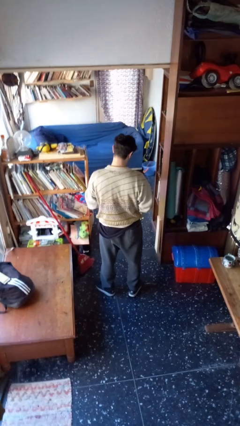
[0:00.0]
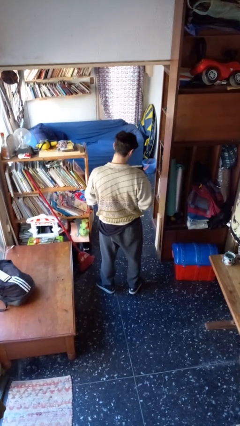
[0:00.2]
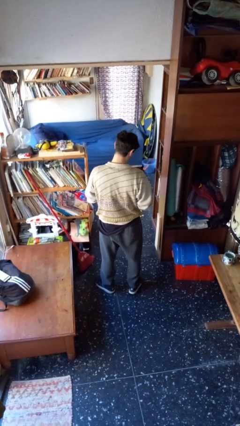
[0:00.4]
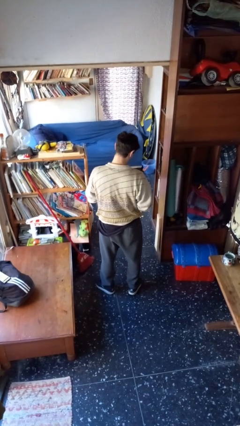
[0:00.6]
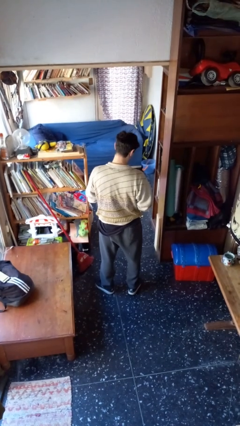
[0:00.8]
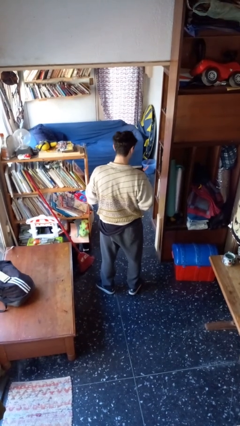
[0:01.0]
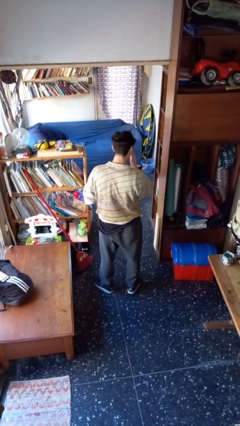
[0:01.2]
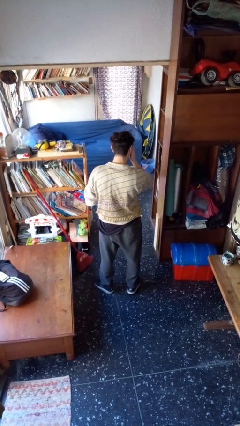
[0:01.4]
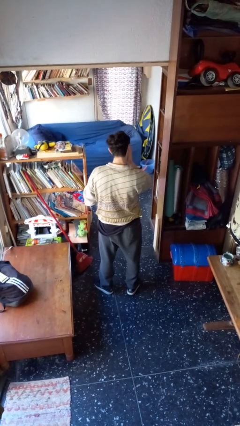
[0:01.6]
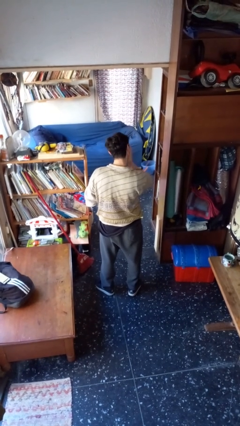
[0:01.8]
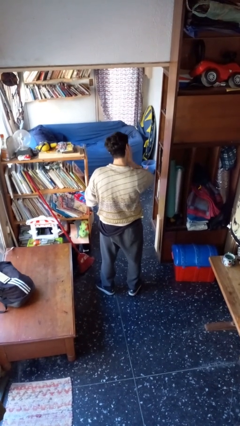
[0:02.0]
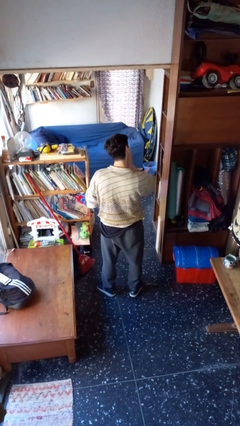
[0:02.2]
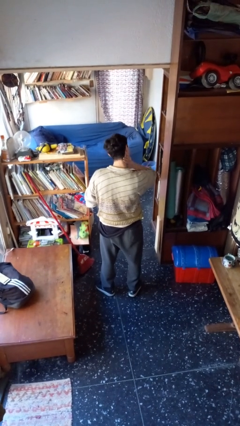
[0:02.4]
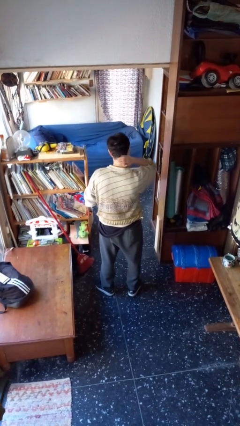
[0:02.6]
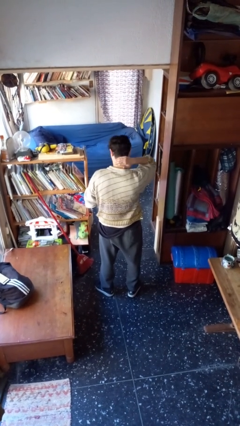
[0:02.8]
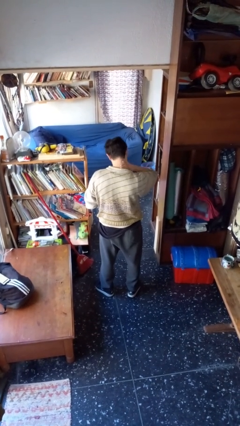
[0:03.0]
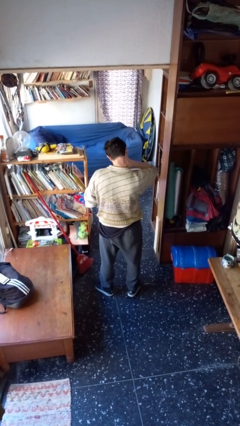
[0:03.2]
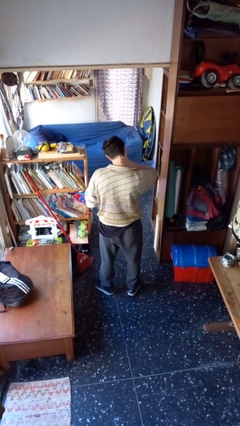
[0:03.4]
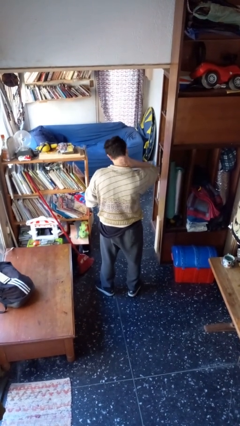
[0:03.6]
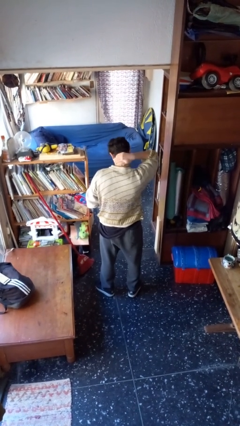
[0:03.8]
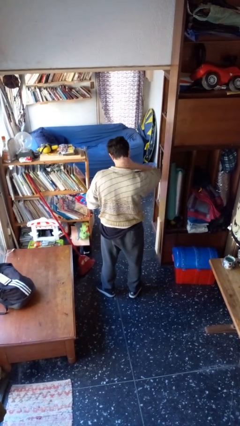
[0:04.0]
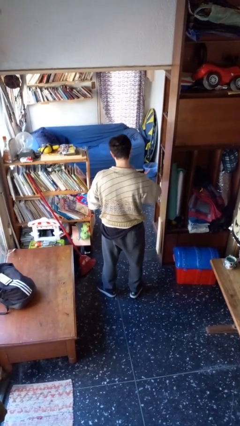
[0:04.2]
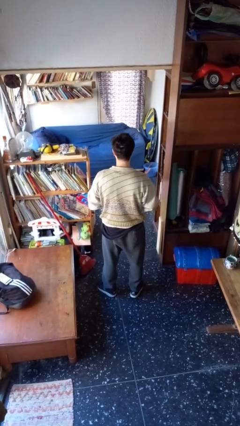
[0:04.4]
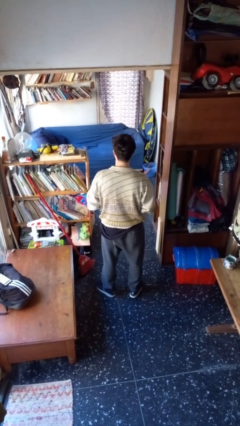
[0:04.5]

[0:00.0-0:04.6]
person applies sunscreen

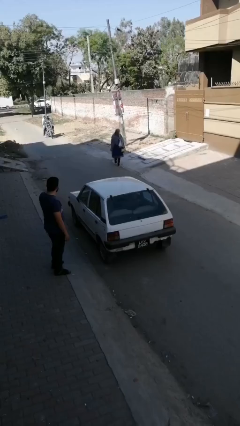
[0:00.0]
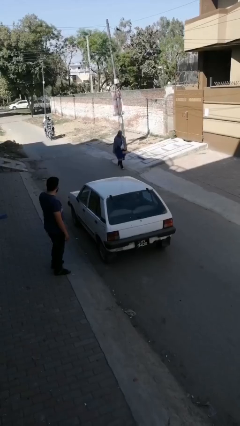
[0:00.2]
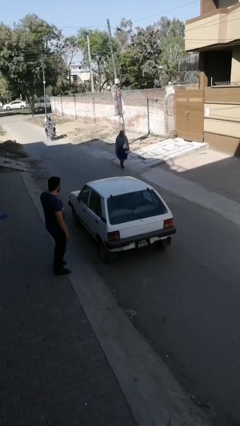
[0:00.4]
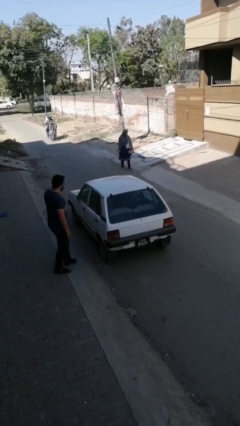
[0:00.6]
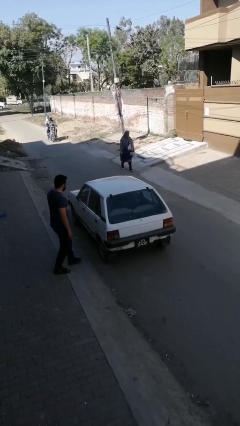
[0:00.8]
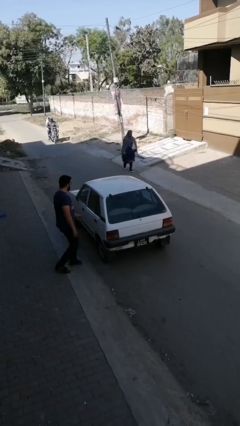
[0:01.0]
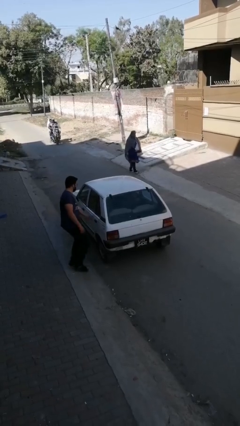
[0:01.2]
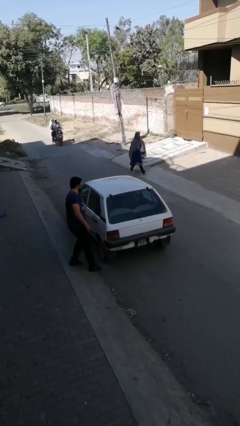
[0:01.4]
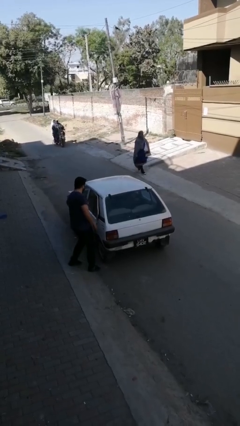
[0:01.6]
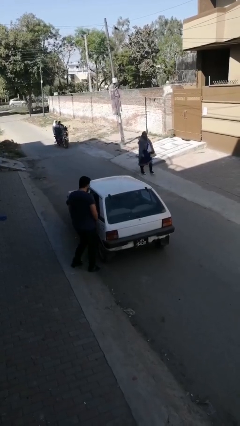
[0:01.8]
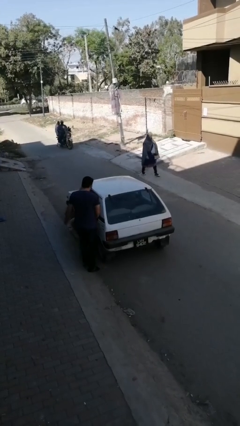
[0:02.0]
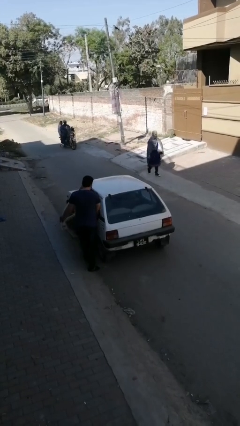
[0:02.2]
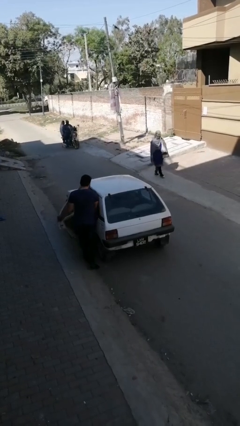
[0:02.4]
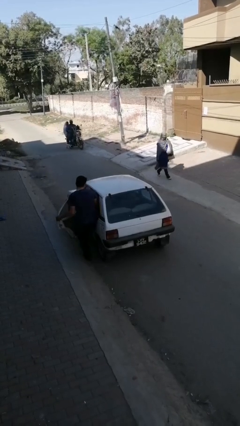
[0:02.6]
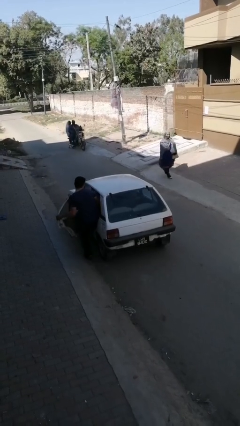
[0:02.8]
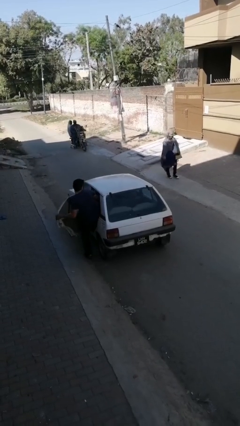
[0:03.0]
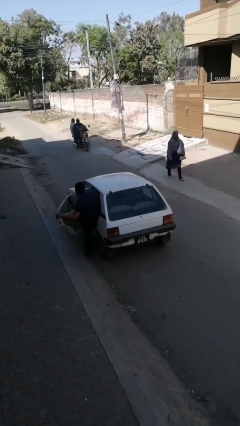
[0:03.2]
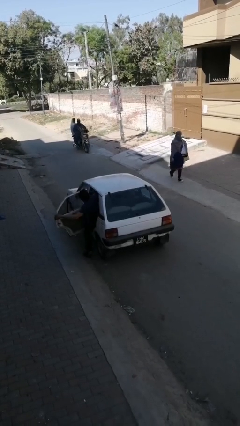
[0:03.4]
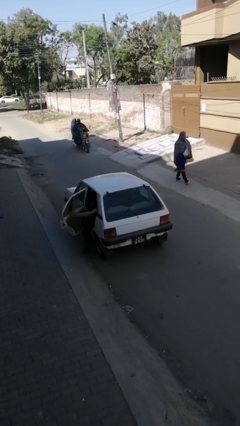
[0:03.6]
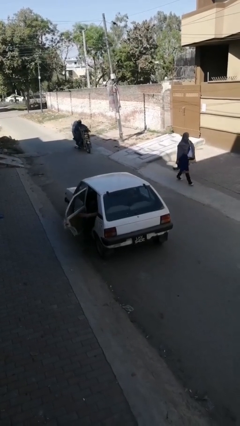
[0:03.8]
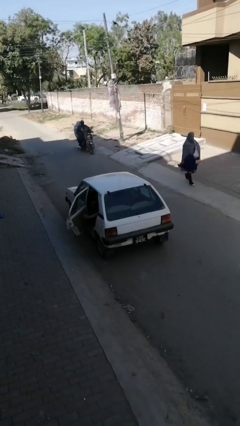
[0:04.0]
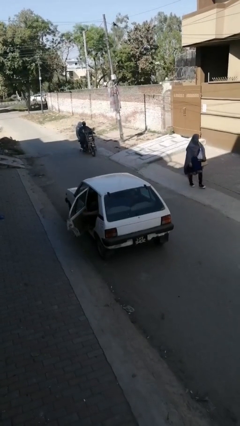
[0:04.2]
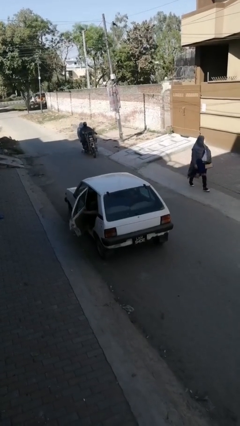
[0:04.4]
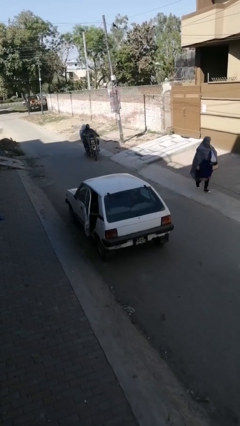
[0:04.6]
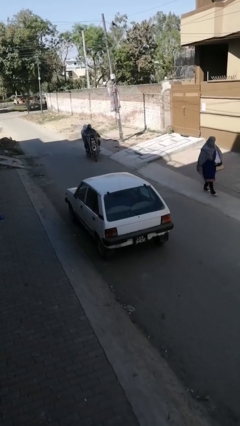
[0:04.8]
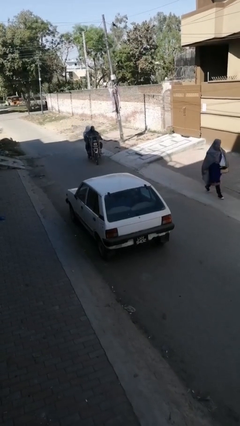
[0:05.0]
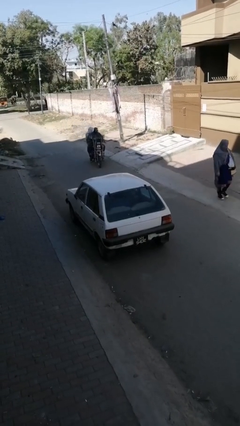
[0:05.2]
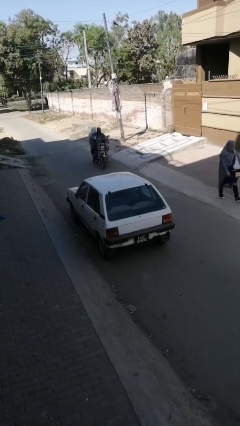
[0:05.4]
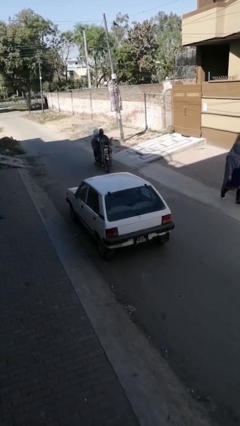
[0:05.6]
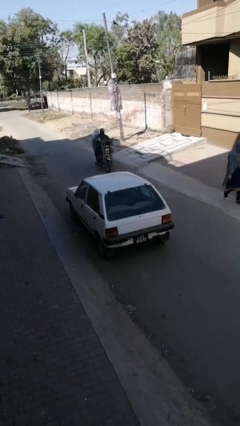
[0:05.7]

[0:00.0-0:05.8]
car picks up person

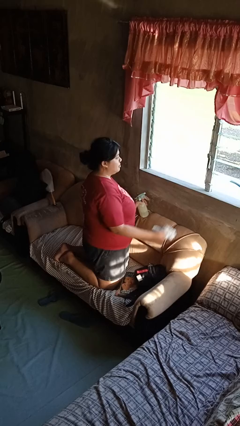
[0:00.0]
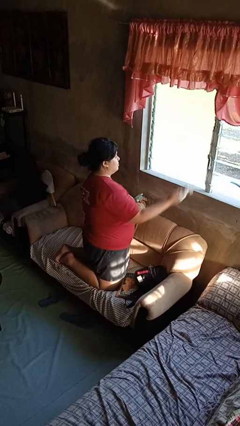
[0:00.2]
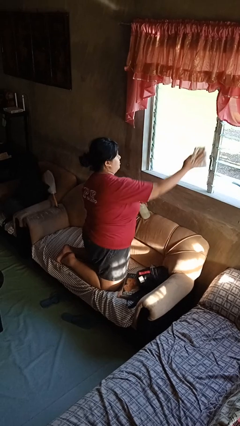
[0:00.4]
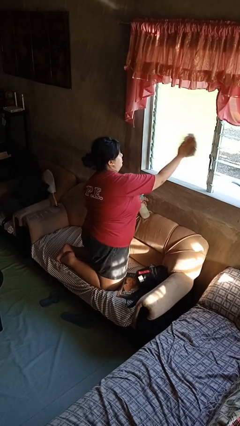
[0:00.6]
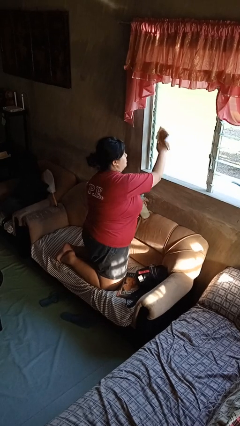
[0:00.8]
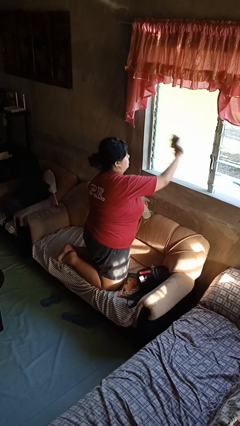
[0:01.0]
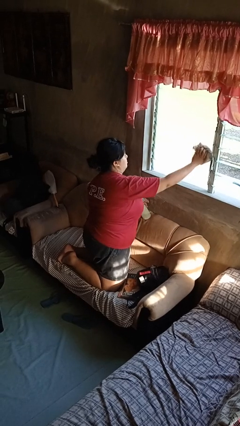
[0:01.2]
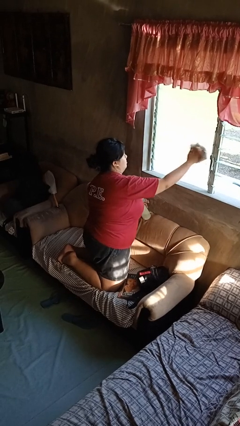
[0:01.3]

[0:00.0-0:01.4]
person washes window

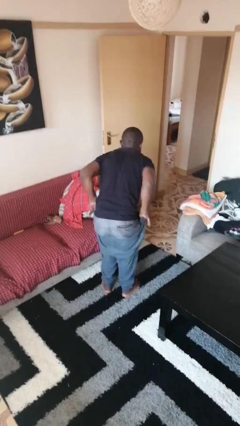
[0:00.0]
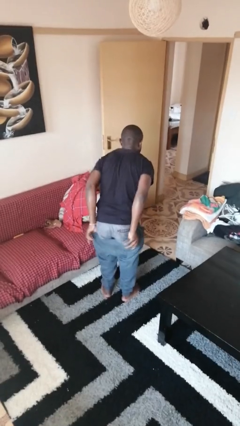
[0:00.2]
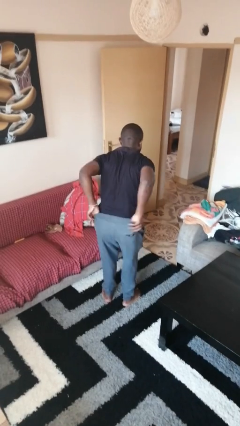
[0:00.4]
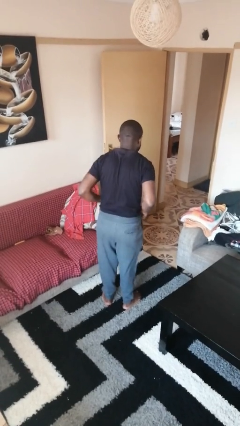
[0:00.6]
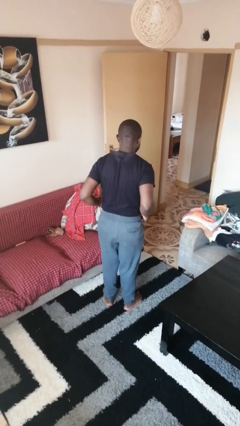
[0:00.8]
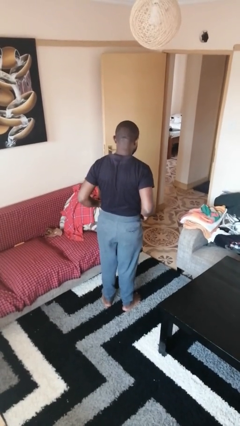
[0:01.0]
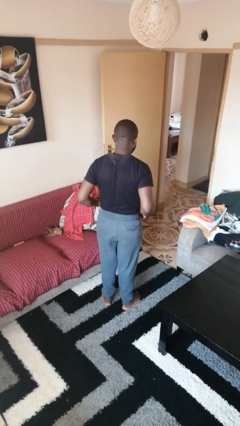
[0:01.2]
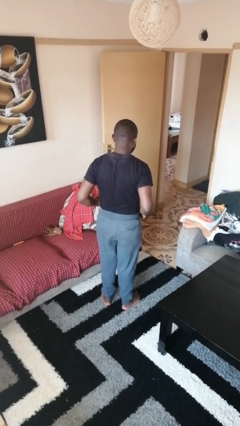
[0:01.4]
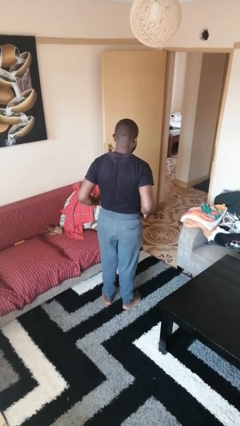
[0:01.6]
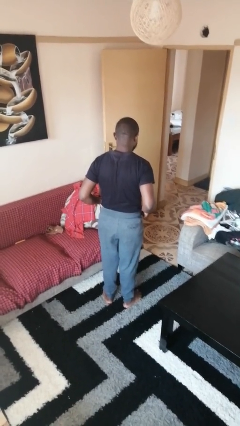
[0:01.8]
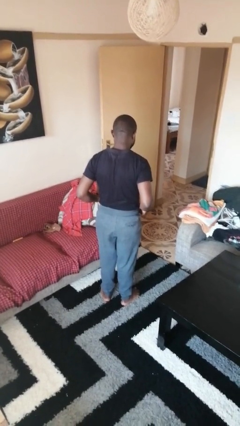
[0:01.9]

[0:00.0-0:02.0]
person puts on pants

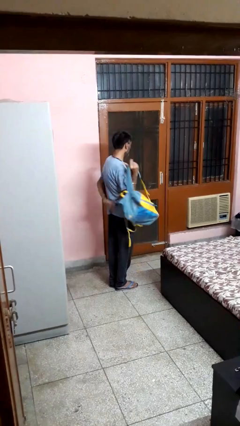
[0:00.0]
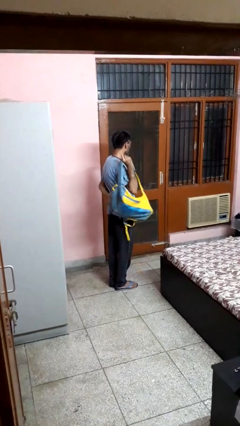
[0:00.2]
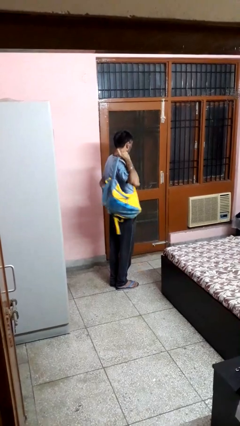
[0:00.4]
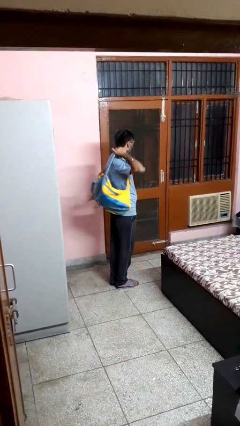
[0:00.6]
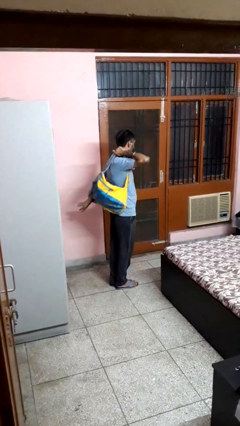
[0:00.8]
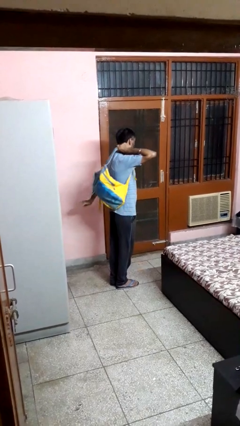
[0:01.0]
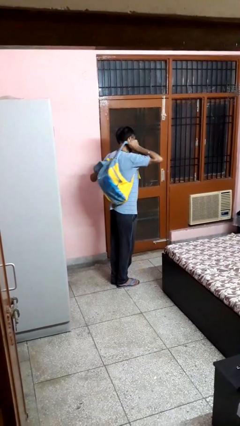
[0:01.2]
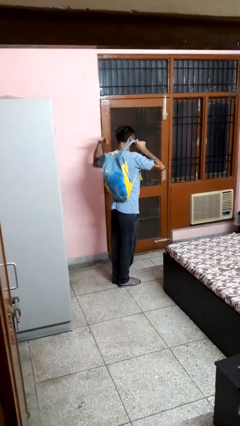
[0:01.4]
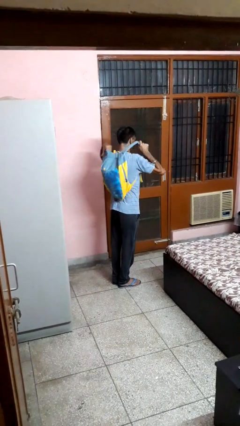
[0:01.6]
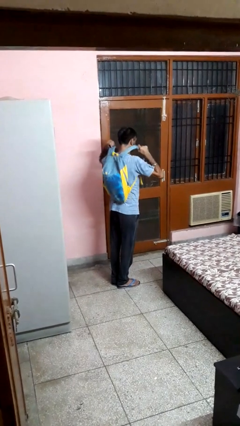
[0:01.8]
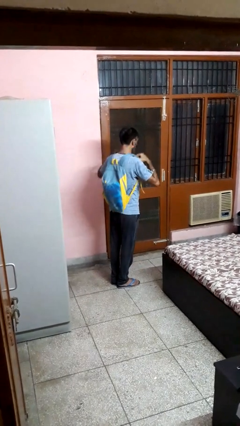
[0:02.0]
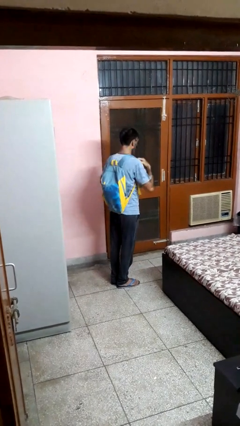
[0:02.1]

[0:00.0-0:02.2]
person puts on backpack

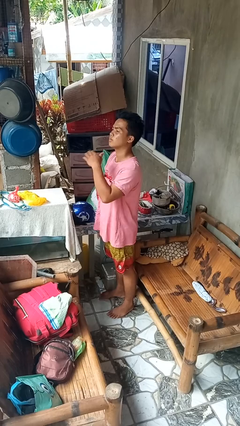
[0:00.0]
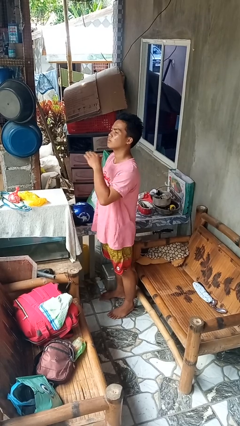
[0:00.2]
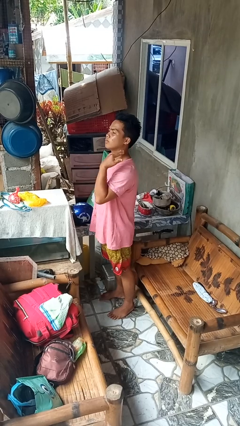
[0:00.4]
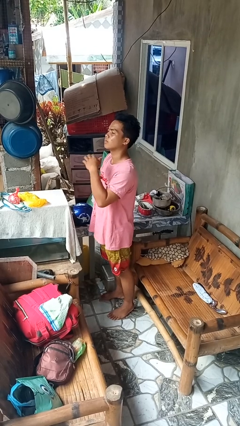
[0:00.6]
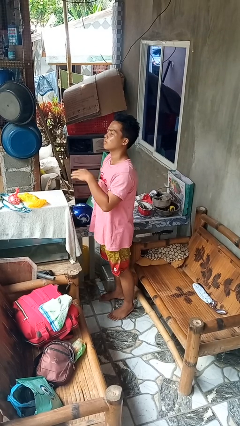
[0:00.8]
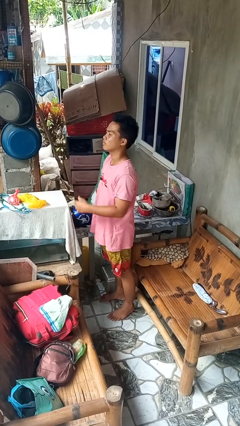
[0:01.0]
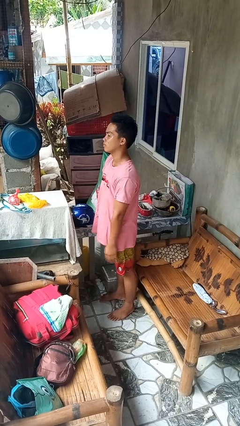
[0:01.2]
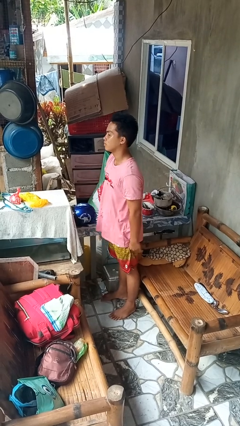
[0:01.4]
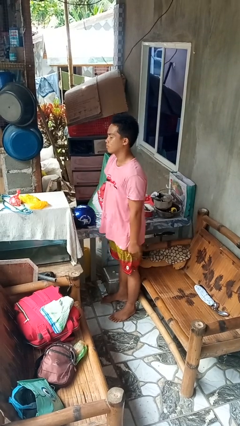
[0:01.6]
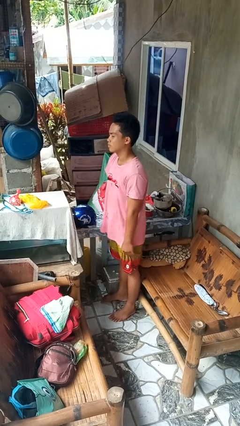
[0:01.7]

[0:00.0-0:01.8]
person gestures cut
